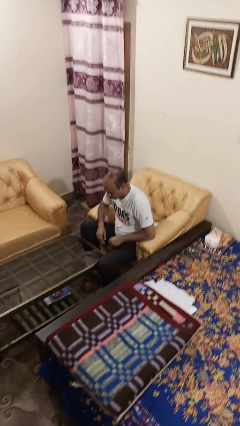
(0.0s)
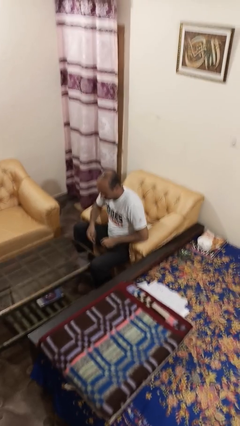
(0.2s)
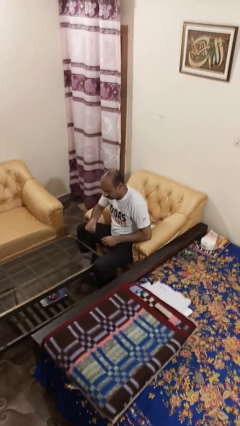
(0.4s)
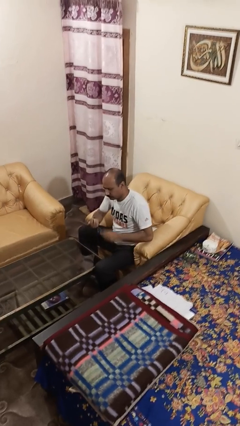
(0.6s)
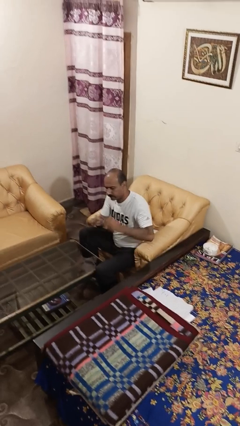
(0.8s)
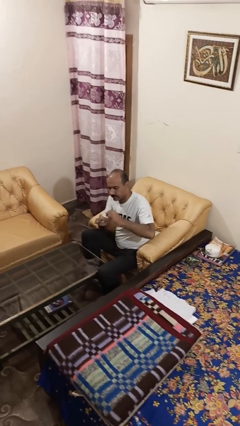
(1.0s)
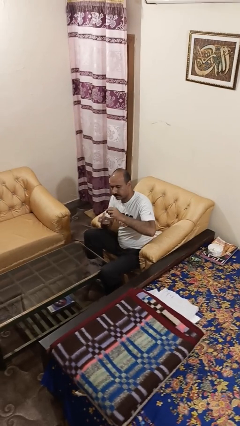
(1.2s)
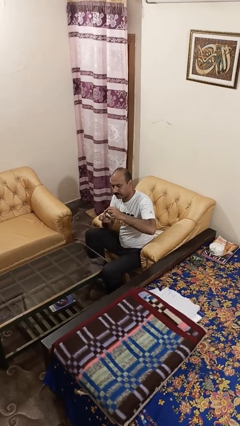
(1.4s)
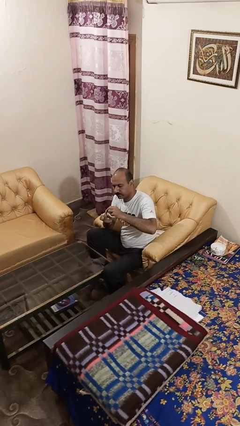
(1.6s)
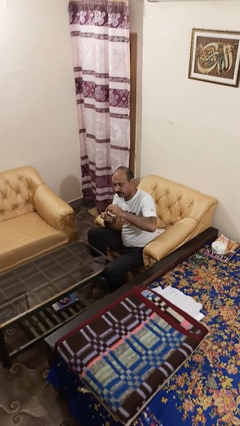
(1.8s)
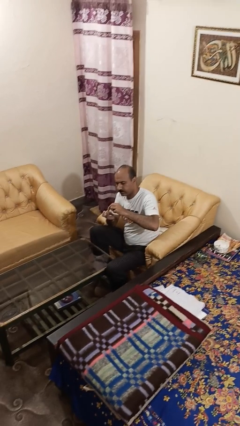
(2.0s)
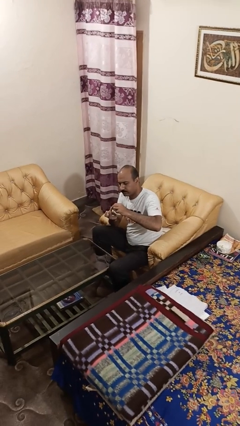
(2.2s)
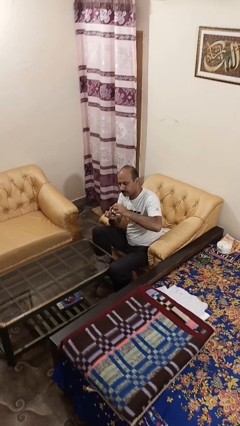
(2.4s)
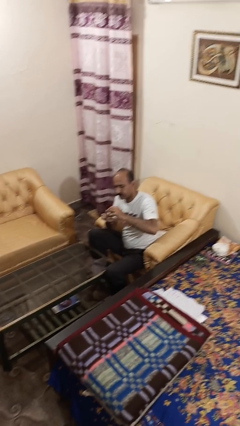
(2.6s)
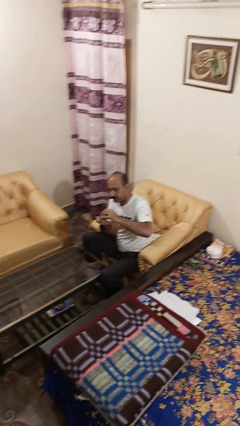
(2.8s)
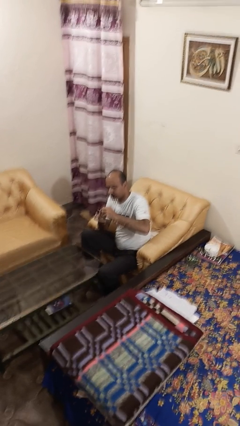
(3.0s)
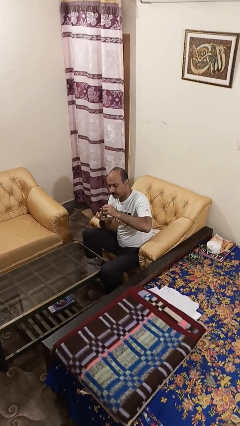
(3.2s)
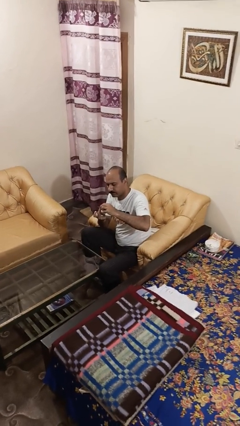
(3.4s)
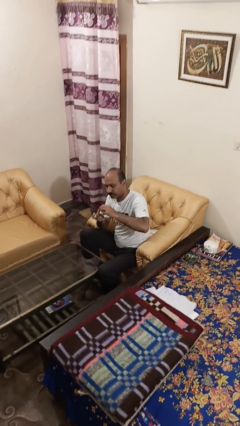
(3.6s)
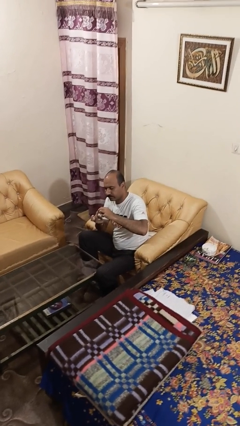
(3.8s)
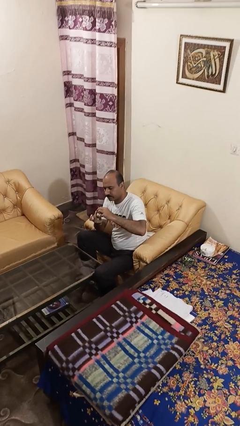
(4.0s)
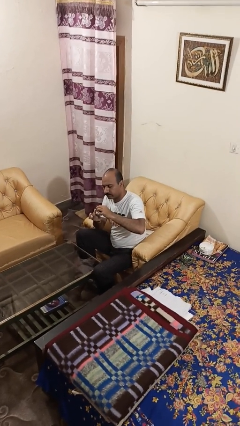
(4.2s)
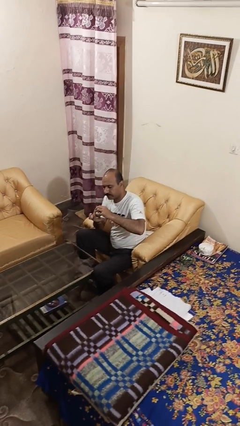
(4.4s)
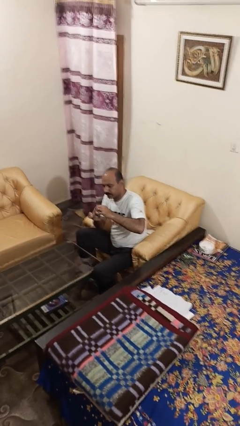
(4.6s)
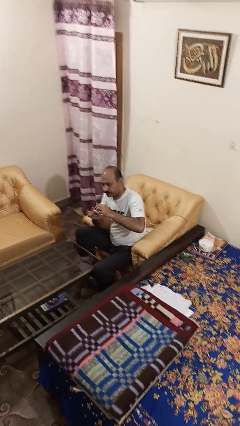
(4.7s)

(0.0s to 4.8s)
person files fingernails

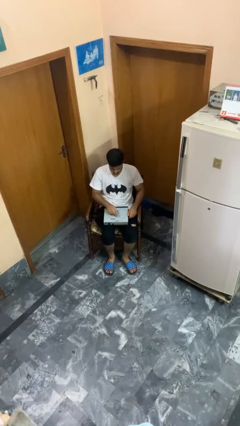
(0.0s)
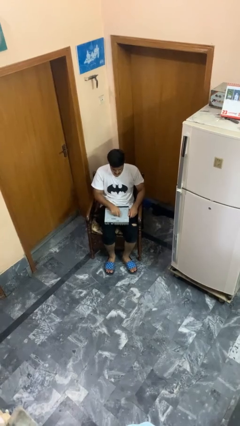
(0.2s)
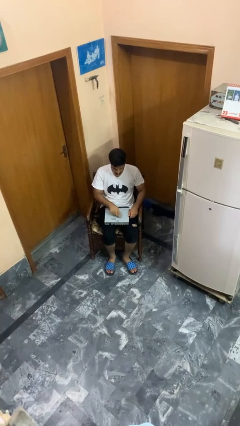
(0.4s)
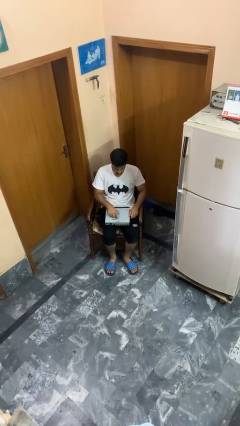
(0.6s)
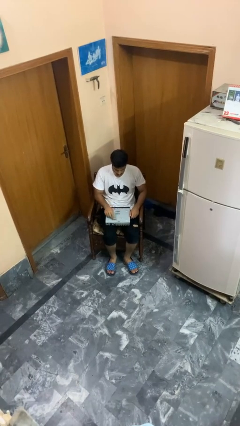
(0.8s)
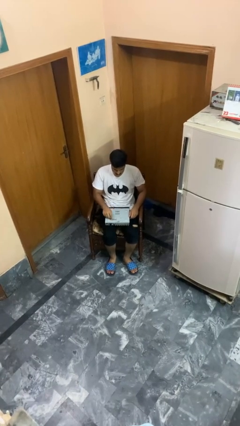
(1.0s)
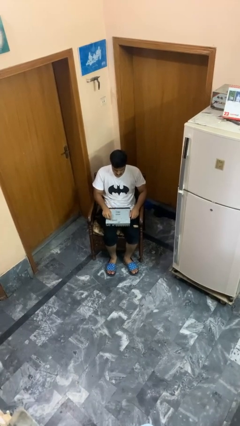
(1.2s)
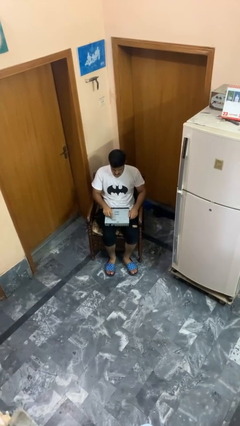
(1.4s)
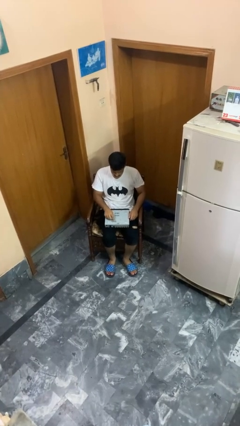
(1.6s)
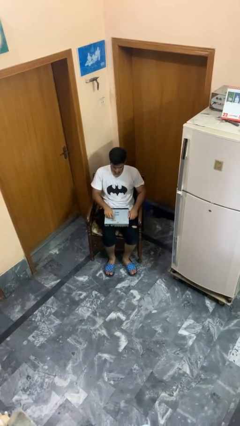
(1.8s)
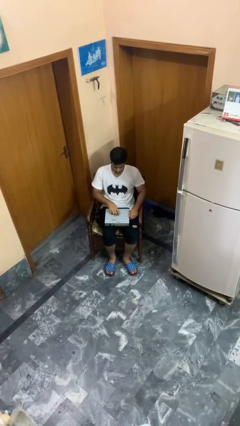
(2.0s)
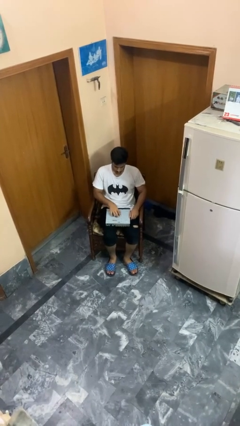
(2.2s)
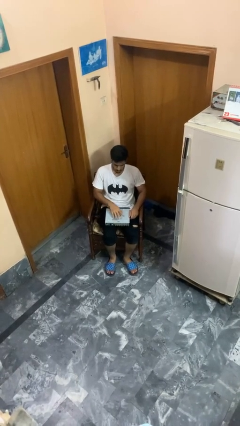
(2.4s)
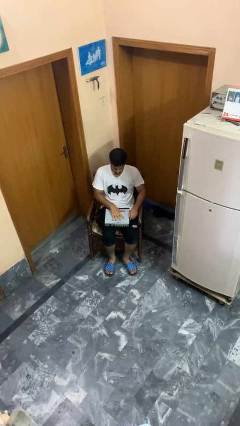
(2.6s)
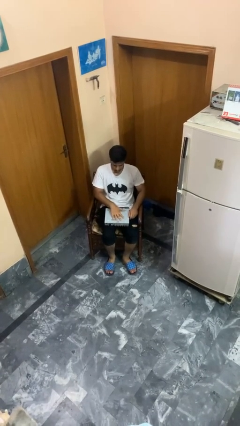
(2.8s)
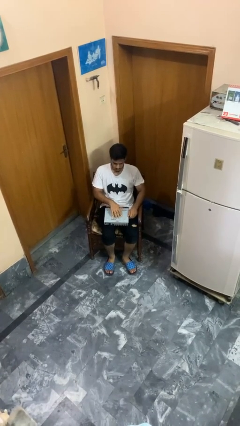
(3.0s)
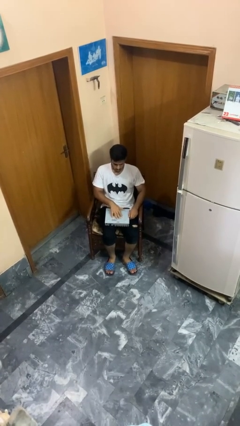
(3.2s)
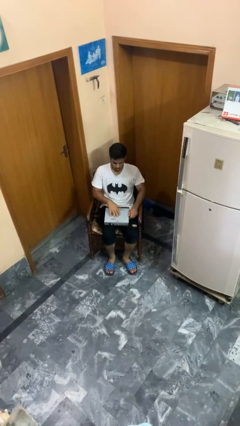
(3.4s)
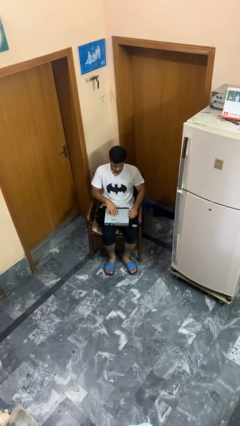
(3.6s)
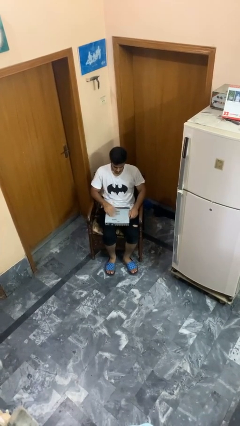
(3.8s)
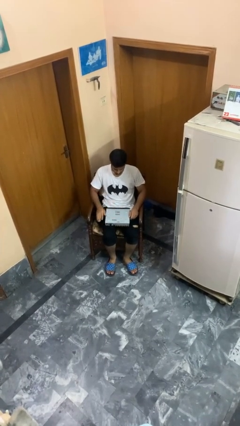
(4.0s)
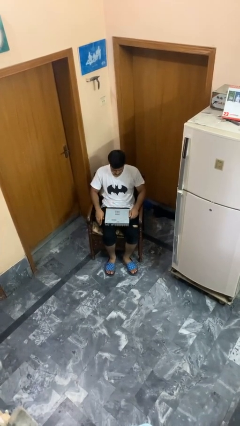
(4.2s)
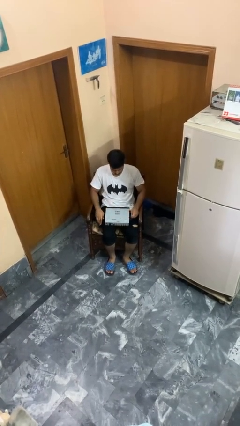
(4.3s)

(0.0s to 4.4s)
person taps object with finger

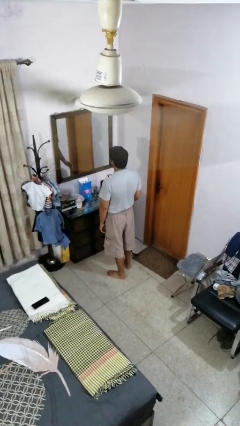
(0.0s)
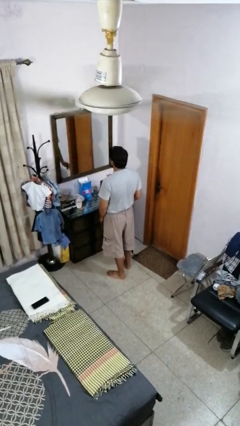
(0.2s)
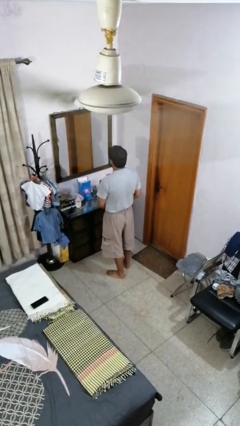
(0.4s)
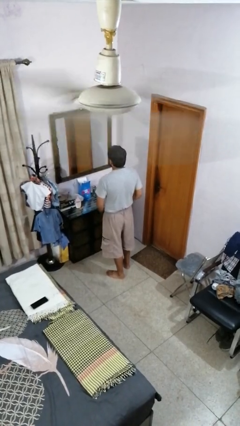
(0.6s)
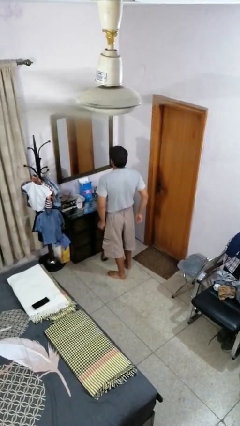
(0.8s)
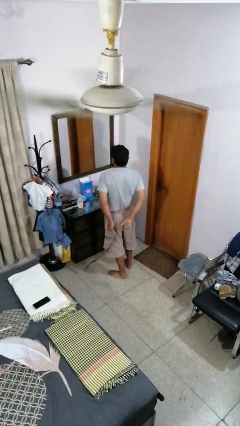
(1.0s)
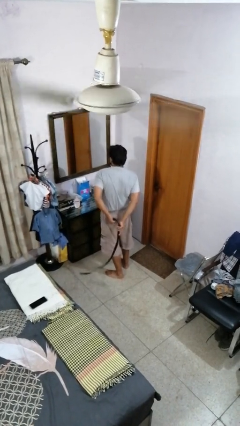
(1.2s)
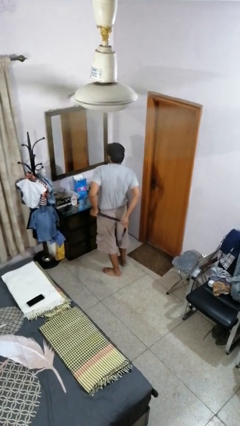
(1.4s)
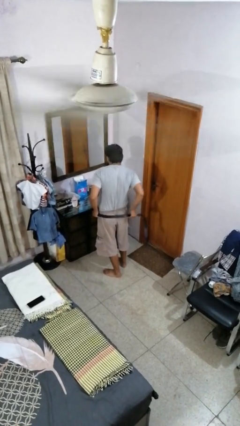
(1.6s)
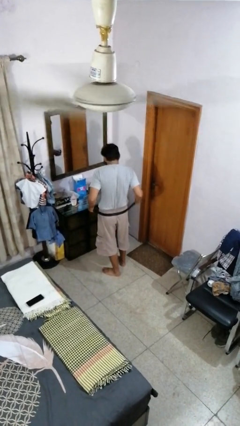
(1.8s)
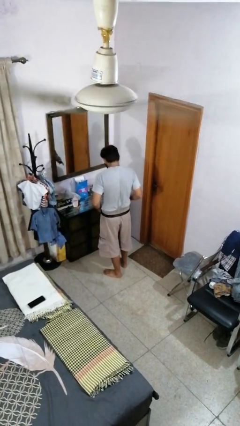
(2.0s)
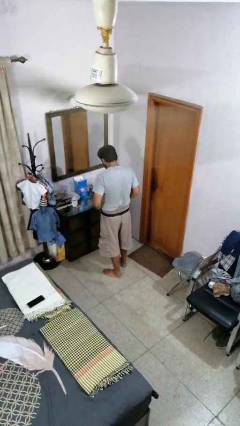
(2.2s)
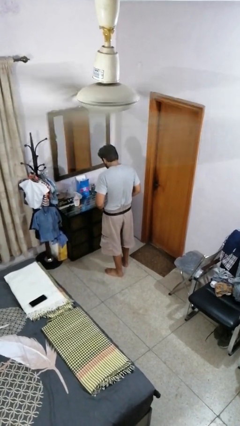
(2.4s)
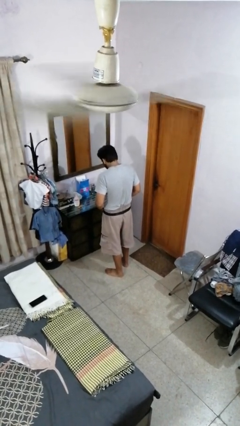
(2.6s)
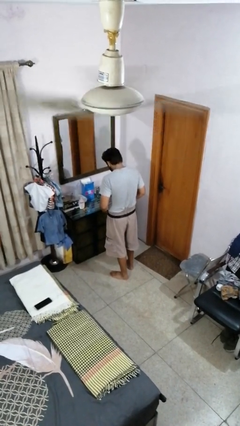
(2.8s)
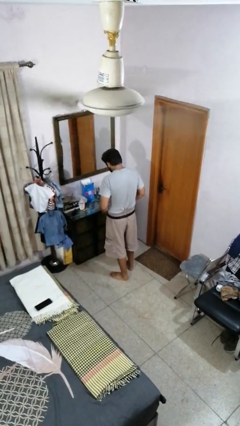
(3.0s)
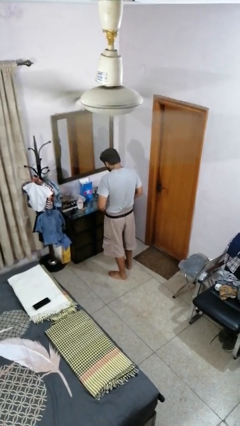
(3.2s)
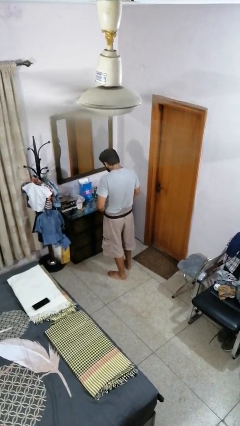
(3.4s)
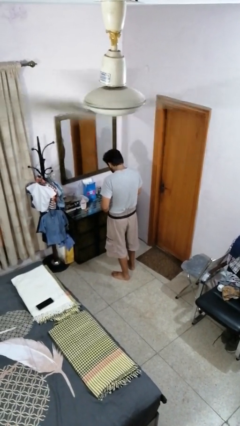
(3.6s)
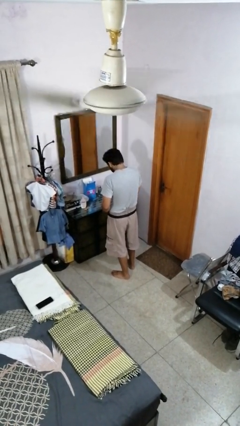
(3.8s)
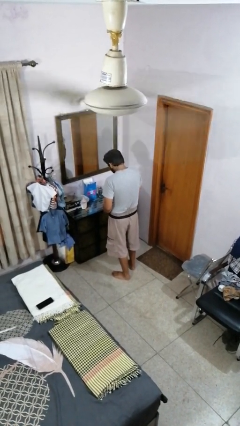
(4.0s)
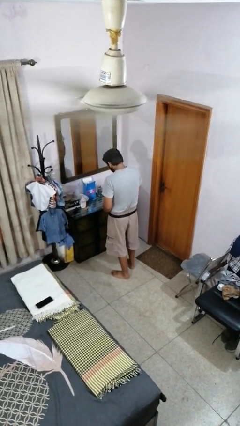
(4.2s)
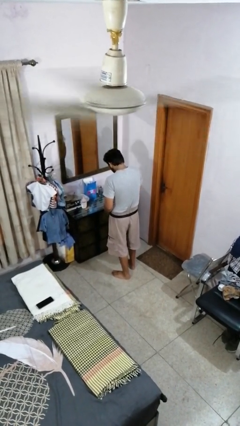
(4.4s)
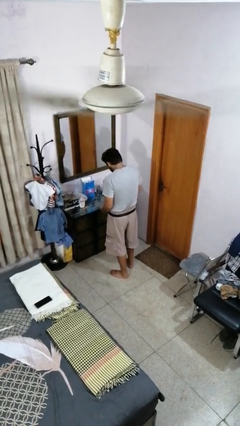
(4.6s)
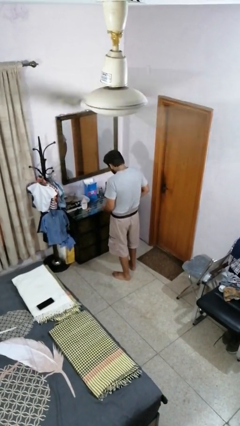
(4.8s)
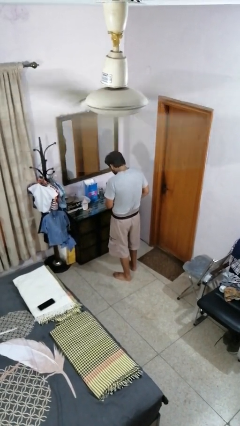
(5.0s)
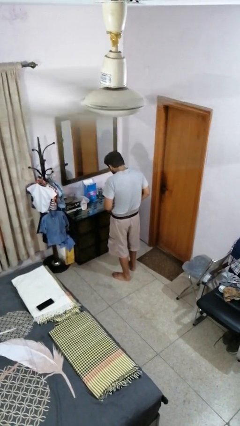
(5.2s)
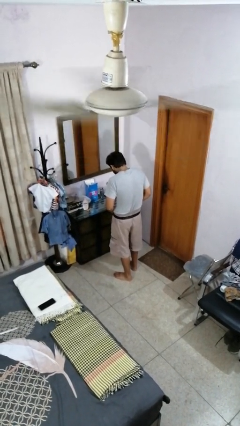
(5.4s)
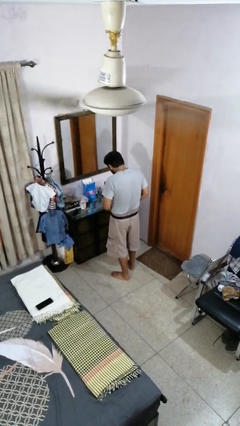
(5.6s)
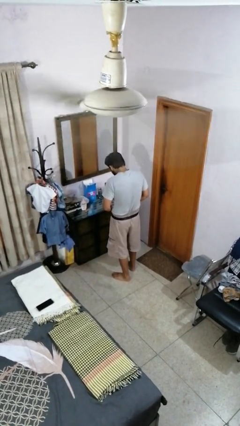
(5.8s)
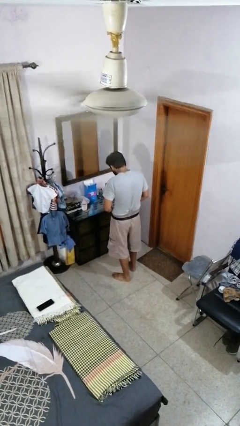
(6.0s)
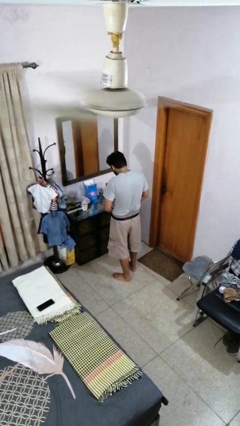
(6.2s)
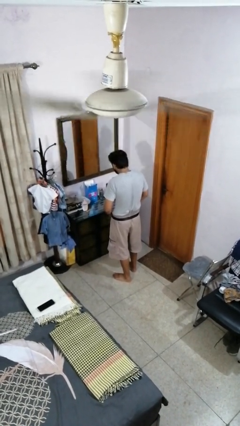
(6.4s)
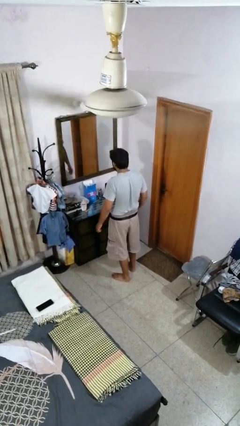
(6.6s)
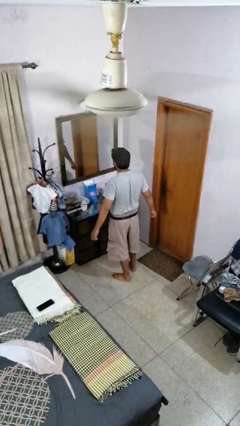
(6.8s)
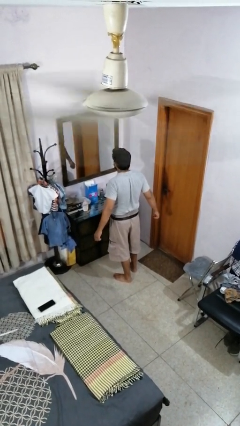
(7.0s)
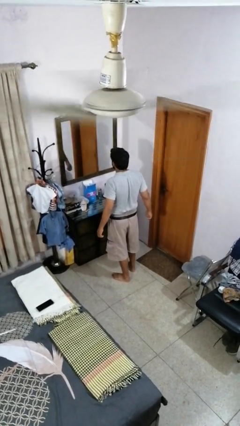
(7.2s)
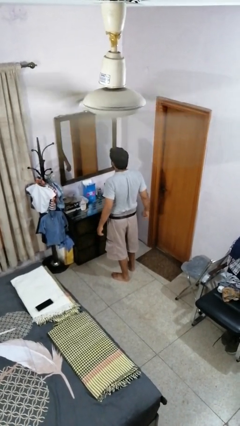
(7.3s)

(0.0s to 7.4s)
person puts on belt

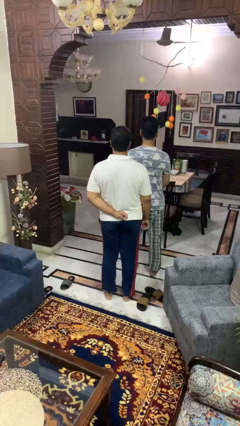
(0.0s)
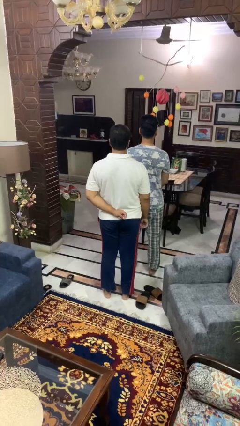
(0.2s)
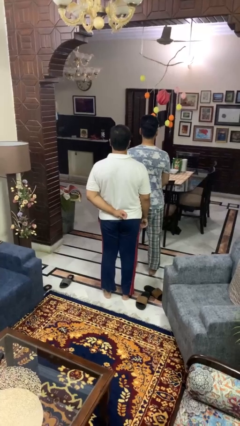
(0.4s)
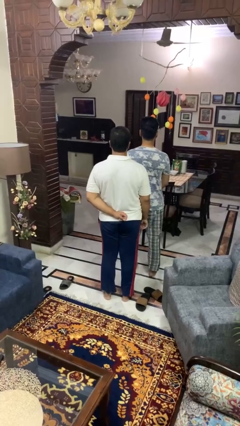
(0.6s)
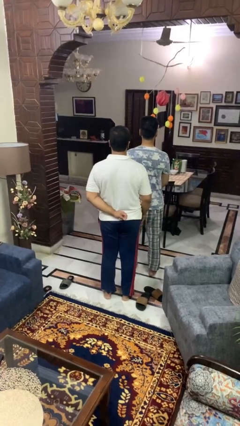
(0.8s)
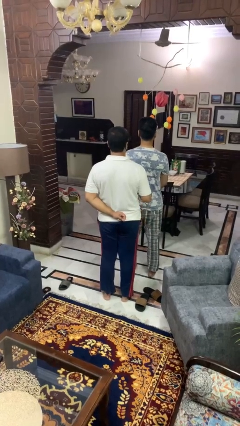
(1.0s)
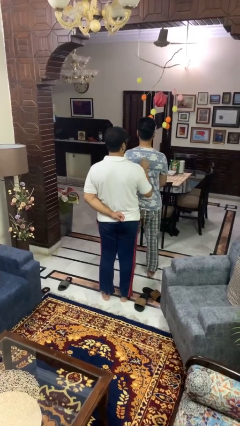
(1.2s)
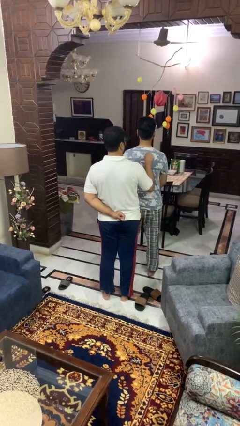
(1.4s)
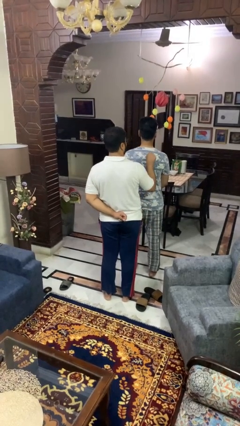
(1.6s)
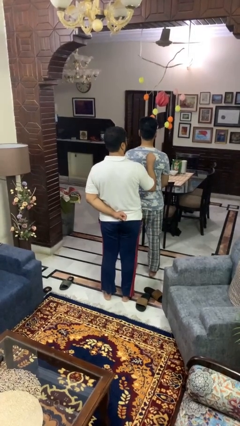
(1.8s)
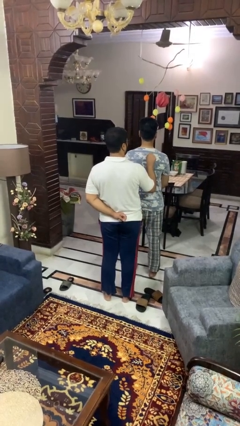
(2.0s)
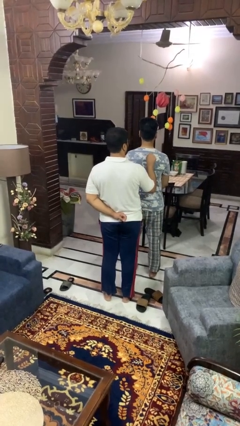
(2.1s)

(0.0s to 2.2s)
person touches back of person
